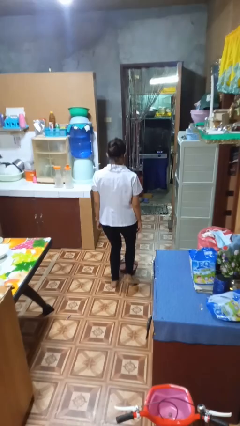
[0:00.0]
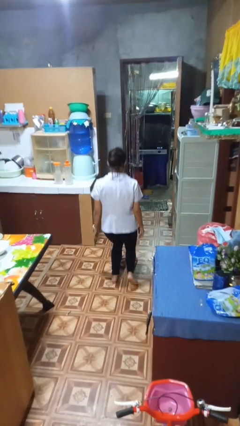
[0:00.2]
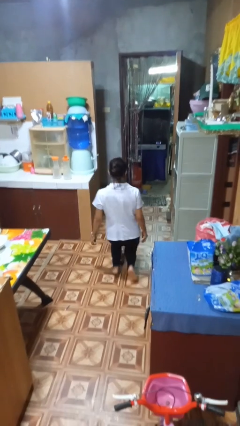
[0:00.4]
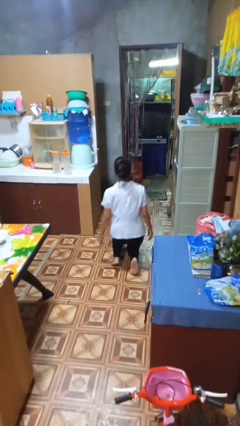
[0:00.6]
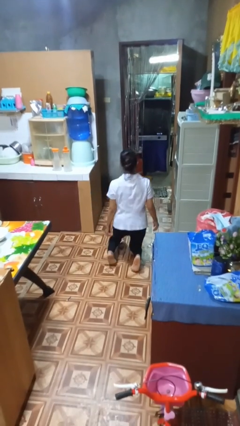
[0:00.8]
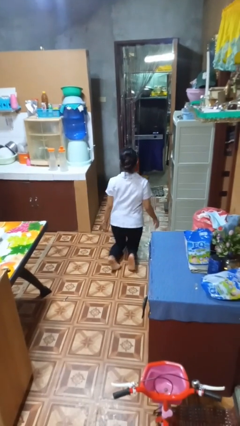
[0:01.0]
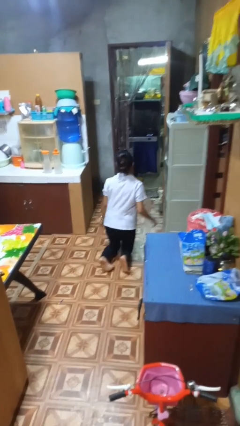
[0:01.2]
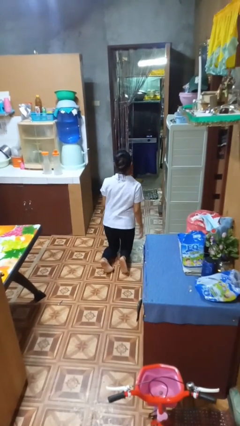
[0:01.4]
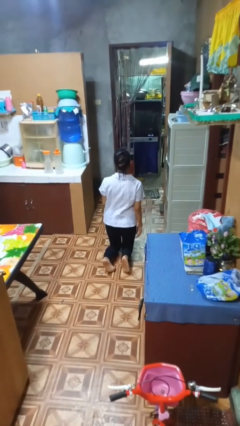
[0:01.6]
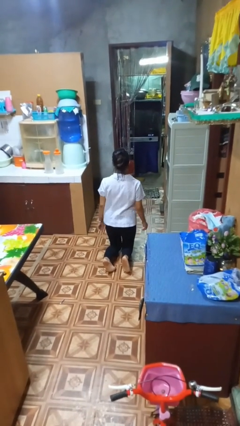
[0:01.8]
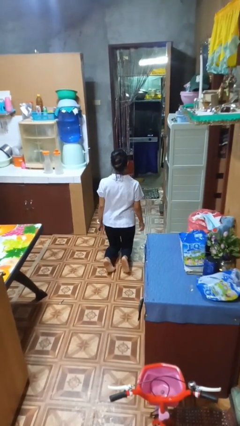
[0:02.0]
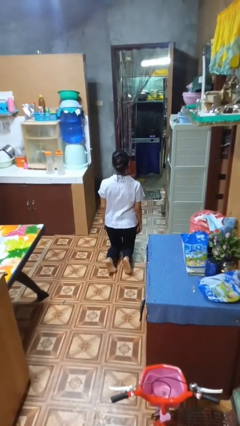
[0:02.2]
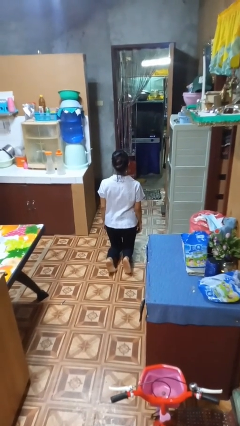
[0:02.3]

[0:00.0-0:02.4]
person kneels

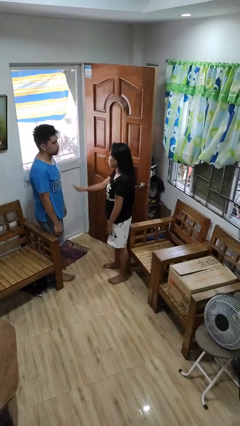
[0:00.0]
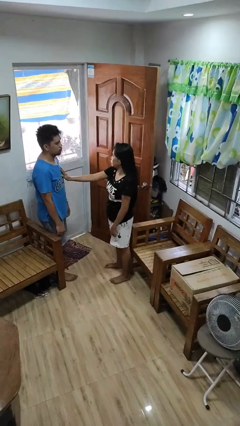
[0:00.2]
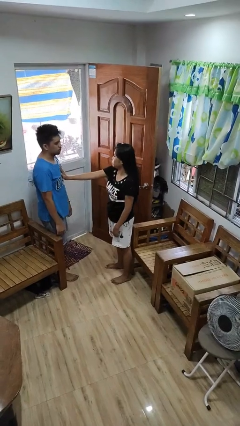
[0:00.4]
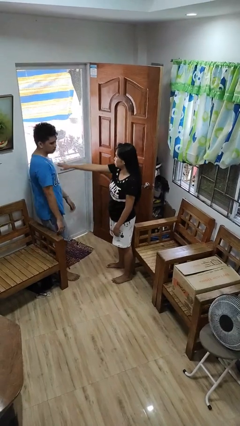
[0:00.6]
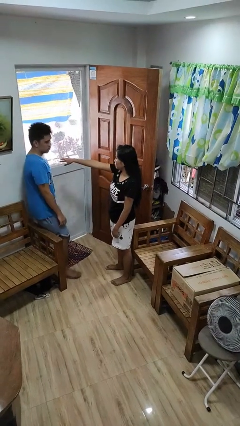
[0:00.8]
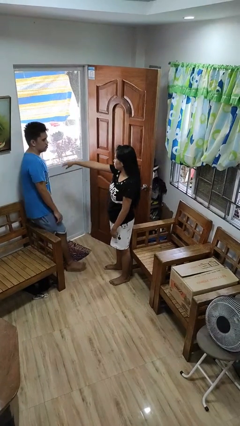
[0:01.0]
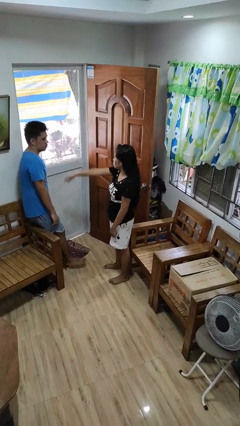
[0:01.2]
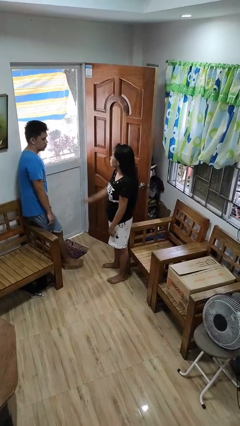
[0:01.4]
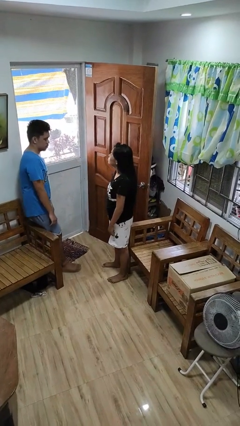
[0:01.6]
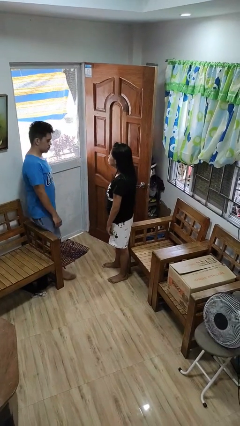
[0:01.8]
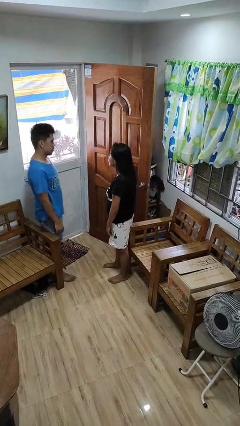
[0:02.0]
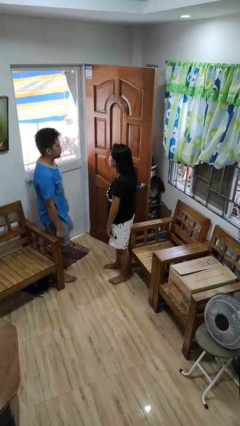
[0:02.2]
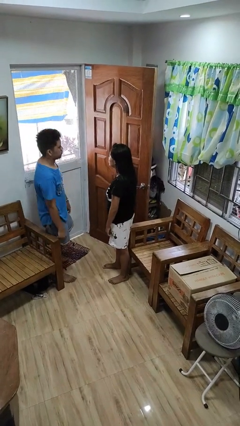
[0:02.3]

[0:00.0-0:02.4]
person shoves person

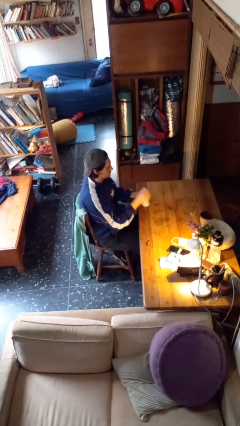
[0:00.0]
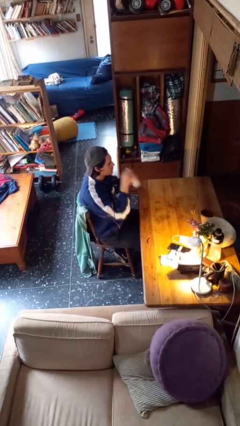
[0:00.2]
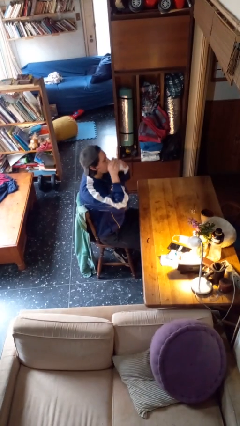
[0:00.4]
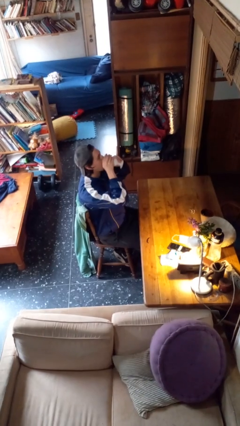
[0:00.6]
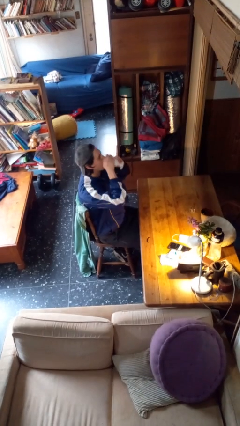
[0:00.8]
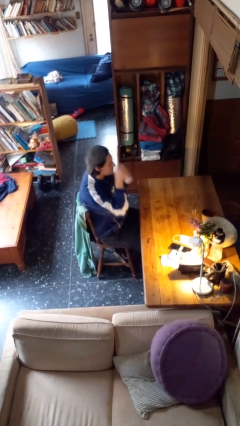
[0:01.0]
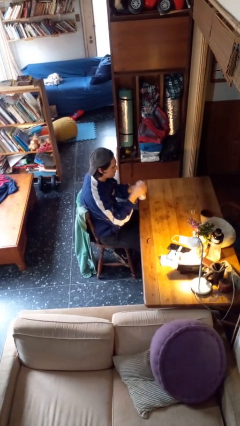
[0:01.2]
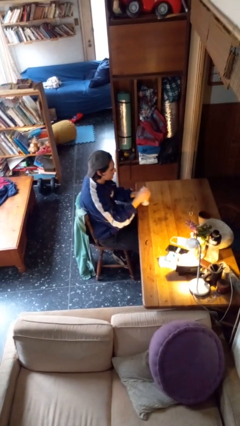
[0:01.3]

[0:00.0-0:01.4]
person drinks from mug

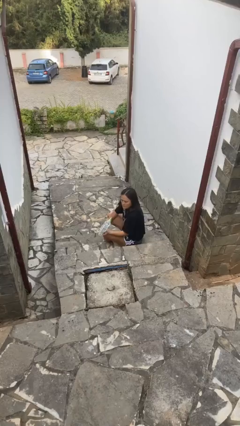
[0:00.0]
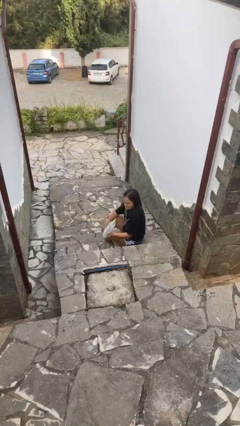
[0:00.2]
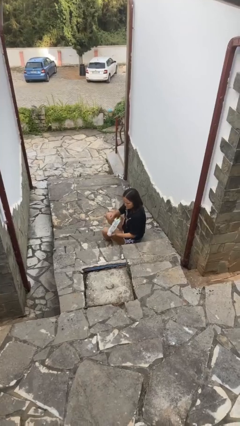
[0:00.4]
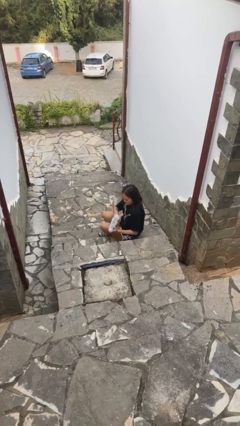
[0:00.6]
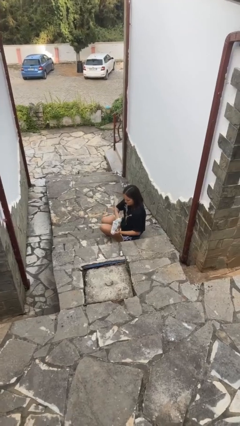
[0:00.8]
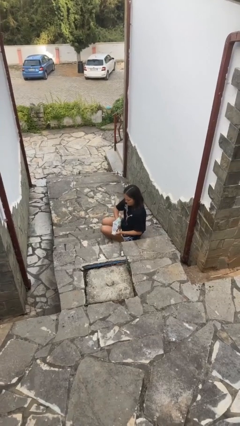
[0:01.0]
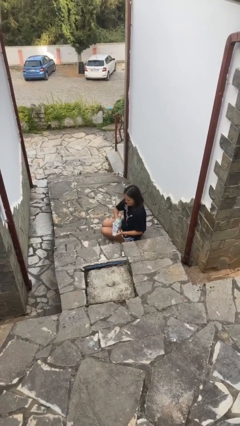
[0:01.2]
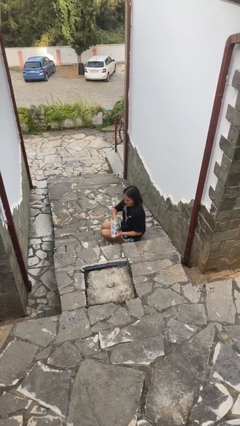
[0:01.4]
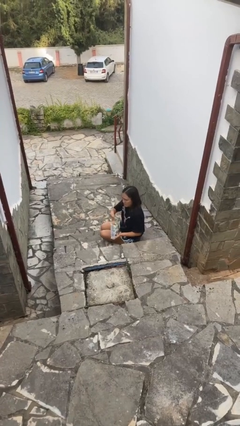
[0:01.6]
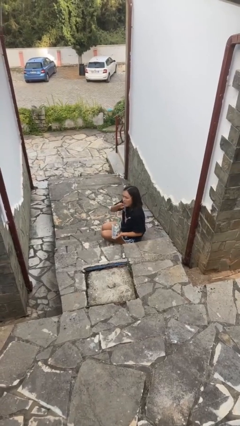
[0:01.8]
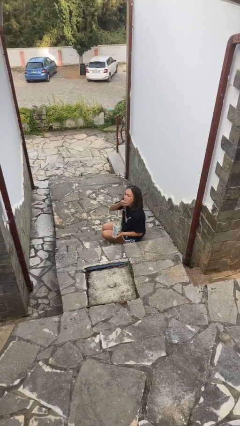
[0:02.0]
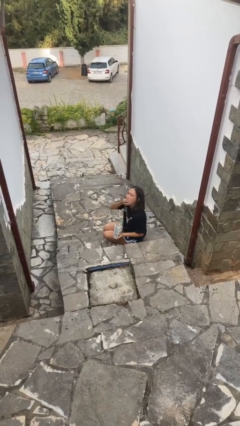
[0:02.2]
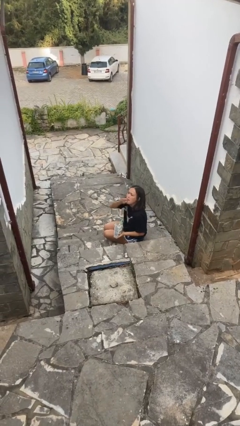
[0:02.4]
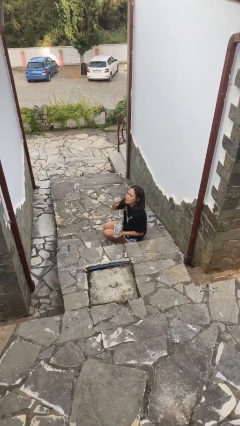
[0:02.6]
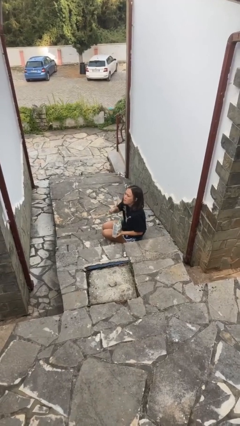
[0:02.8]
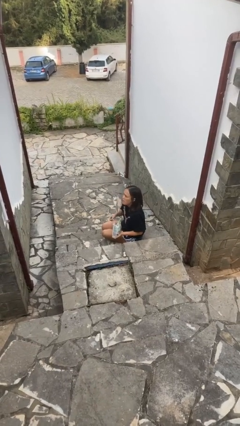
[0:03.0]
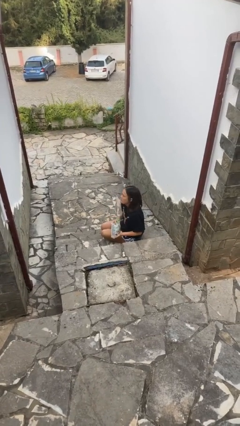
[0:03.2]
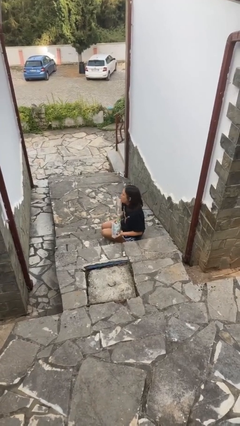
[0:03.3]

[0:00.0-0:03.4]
person eats snack from bag

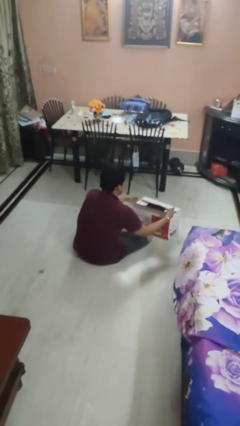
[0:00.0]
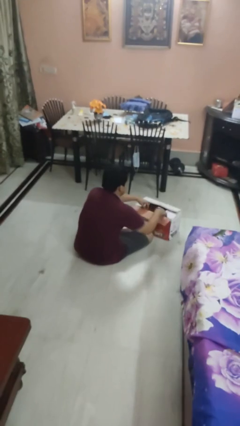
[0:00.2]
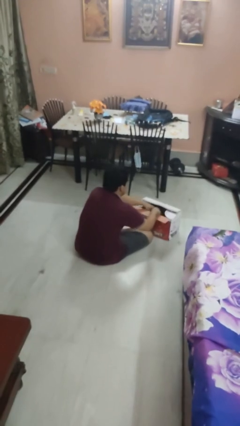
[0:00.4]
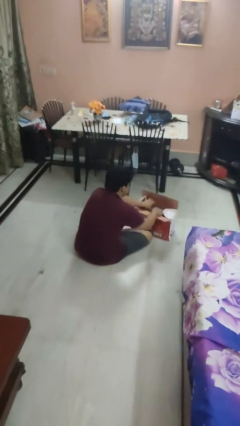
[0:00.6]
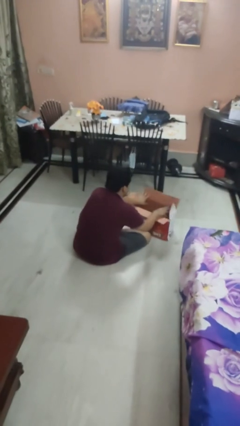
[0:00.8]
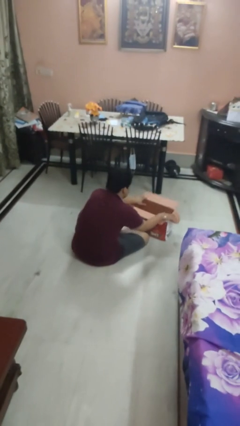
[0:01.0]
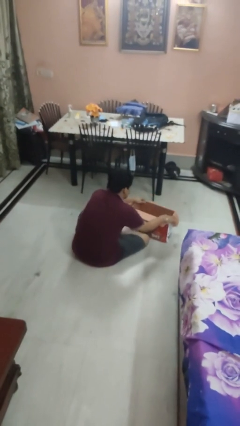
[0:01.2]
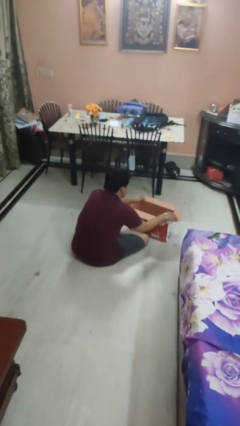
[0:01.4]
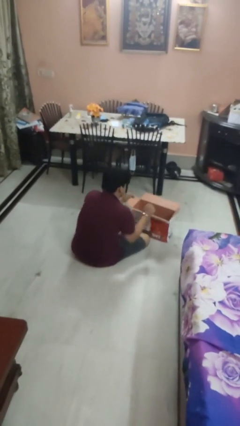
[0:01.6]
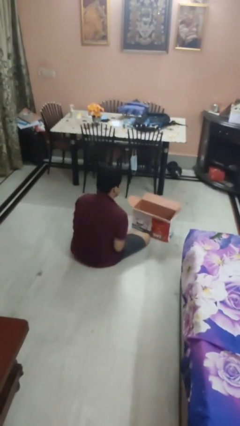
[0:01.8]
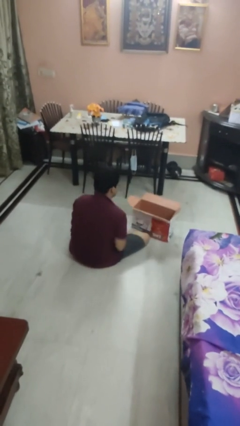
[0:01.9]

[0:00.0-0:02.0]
person opens box

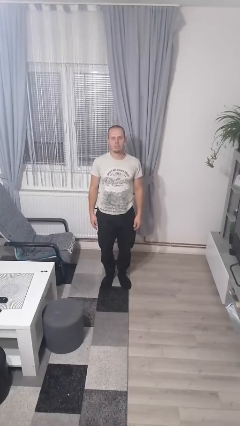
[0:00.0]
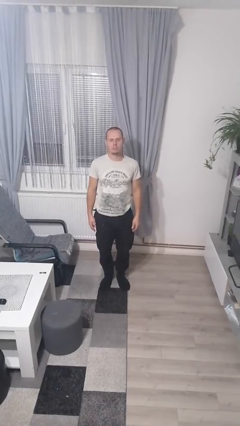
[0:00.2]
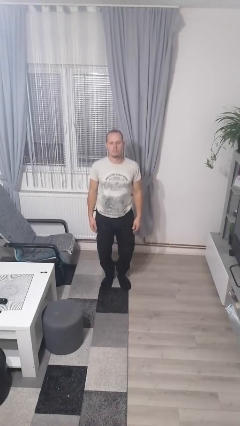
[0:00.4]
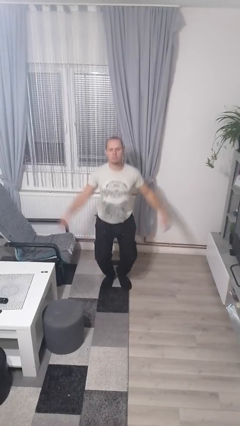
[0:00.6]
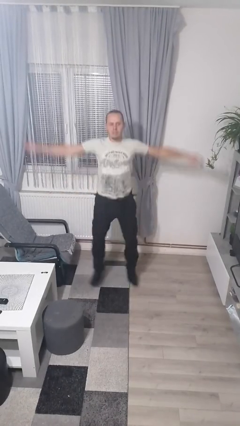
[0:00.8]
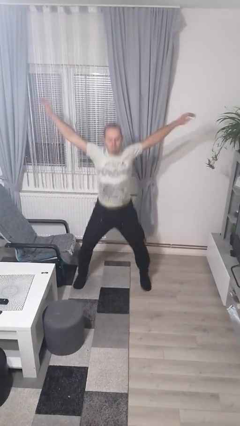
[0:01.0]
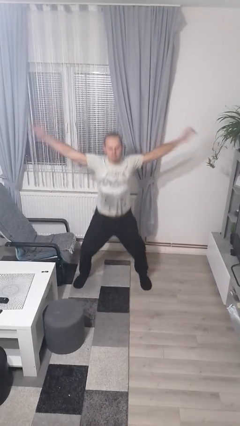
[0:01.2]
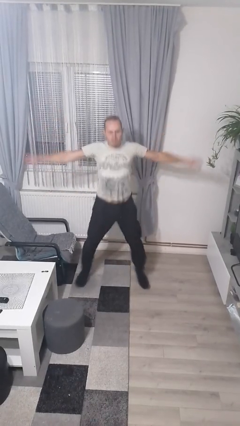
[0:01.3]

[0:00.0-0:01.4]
person exercises with jumping jacks

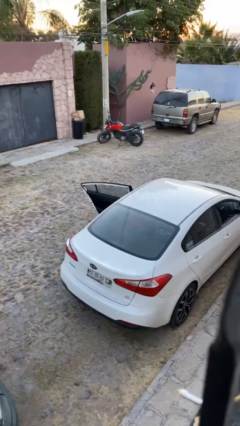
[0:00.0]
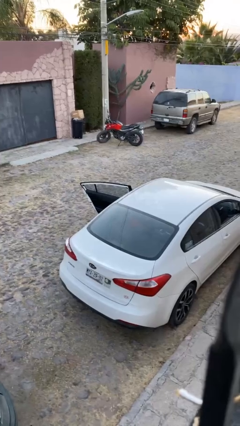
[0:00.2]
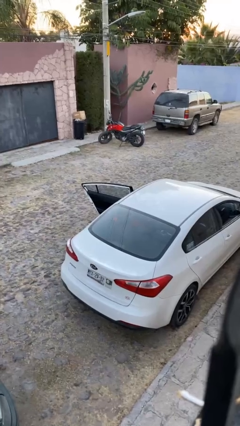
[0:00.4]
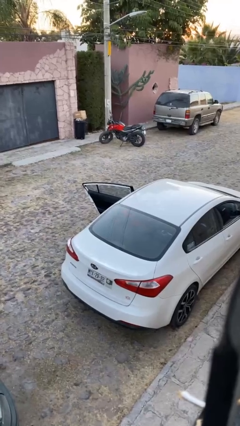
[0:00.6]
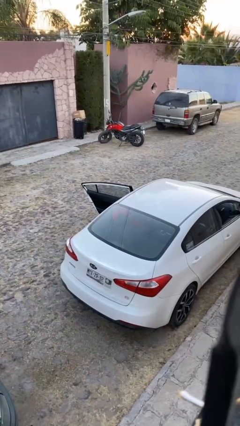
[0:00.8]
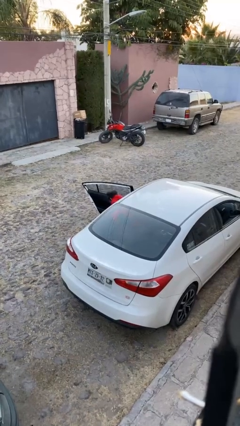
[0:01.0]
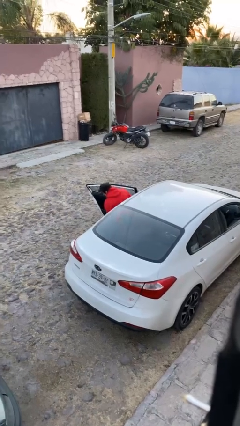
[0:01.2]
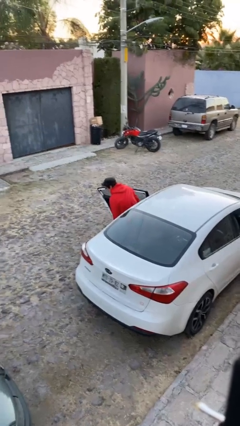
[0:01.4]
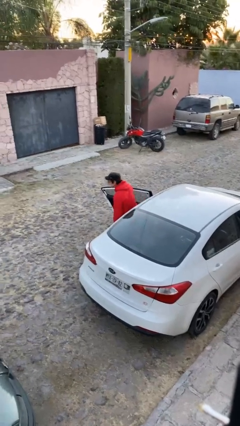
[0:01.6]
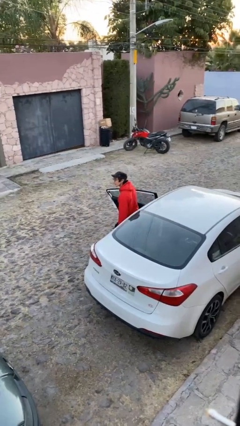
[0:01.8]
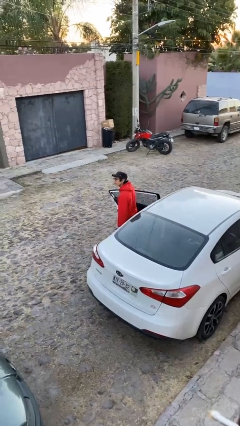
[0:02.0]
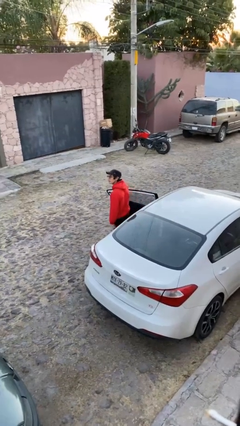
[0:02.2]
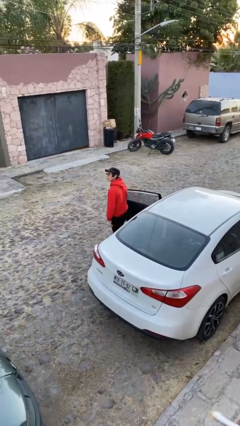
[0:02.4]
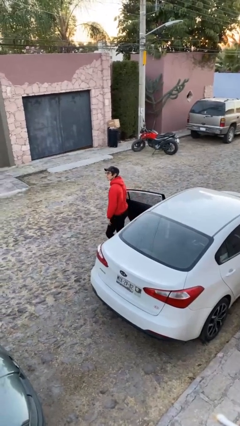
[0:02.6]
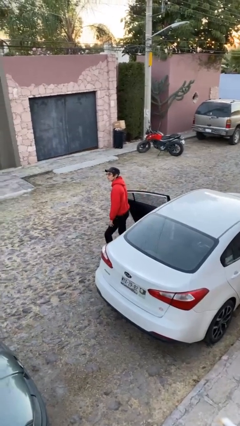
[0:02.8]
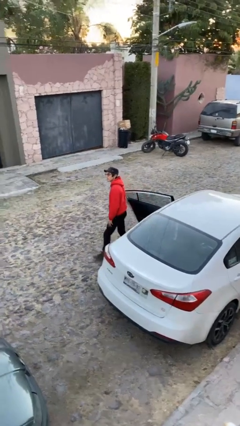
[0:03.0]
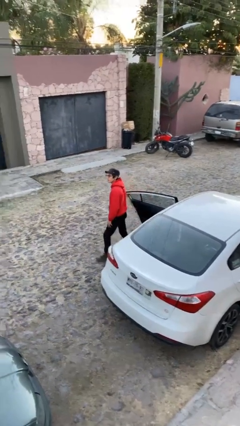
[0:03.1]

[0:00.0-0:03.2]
person exits car

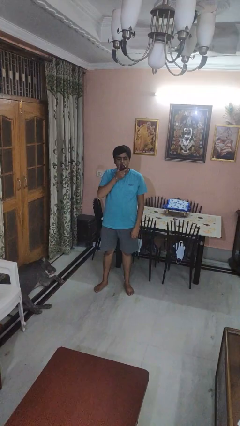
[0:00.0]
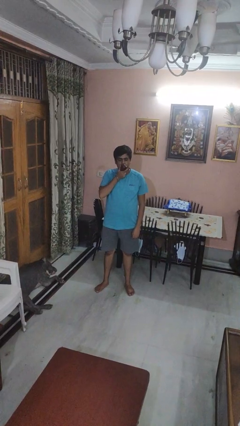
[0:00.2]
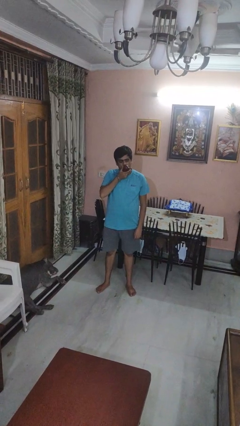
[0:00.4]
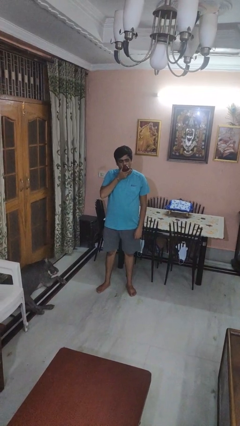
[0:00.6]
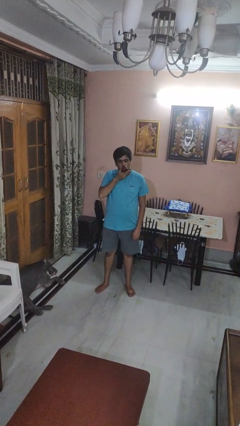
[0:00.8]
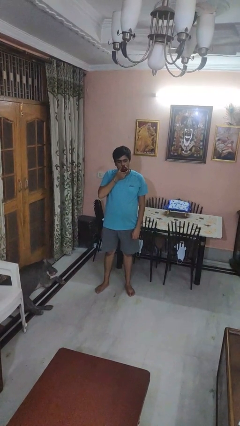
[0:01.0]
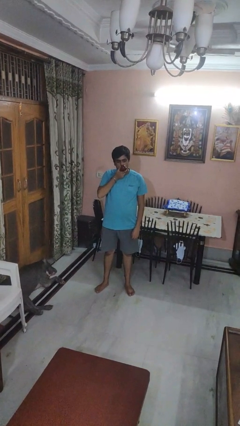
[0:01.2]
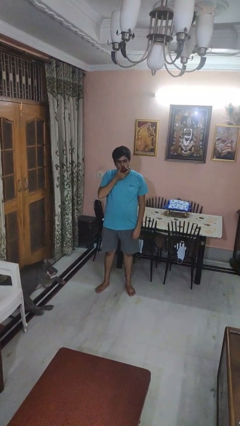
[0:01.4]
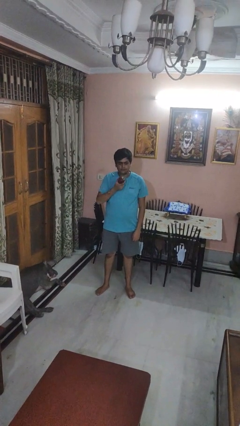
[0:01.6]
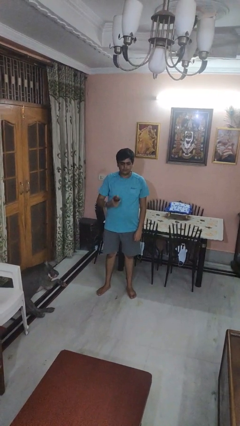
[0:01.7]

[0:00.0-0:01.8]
person eats apple
